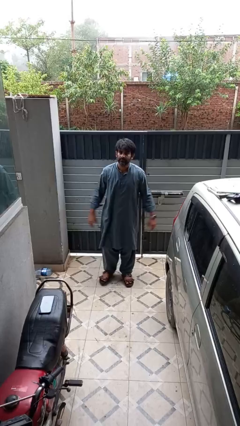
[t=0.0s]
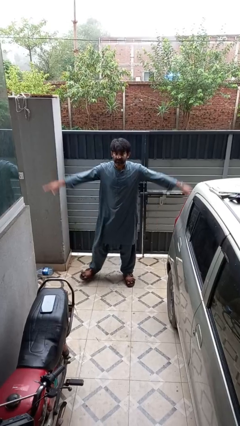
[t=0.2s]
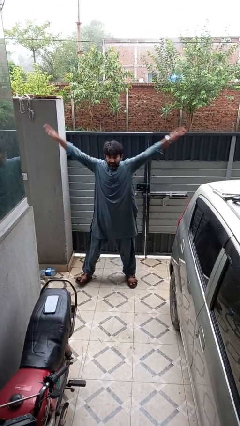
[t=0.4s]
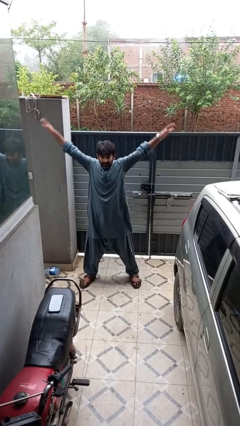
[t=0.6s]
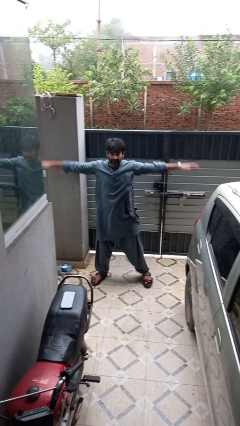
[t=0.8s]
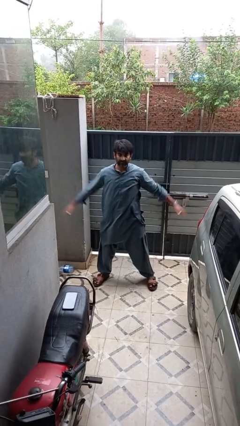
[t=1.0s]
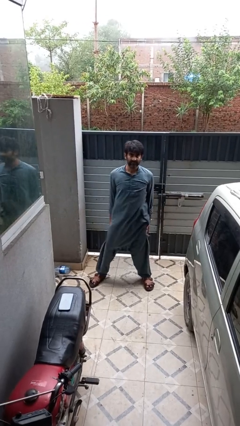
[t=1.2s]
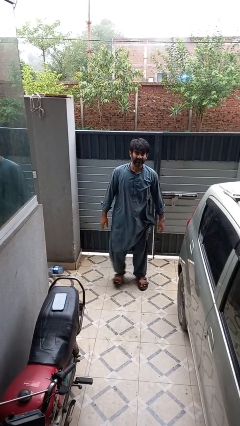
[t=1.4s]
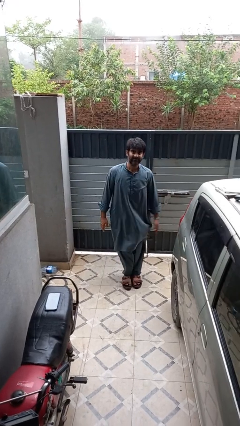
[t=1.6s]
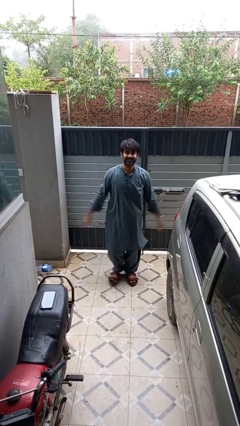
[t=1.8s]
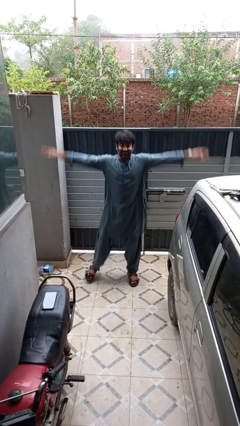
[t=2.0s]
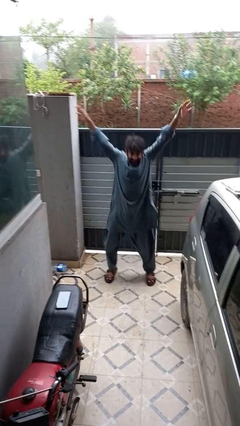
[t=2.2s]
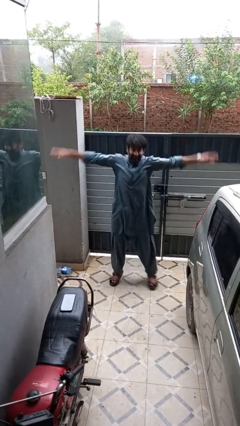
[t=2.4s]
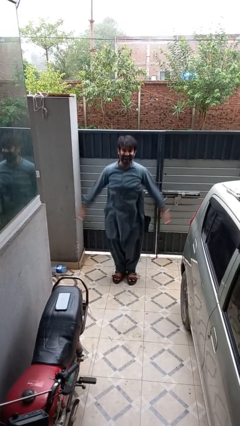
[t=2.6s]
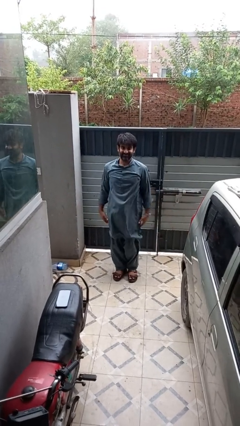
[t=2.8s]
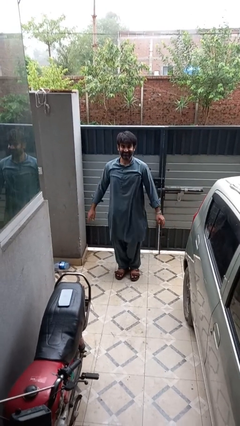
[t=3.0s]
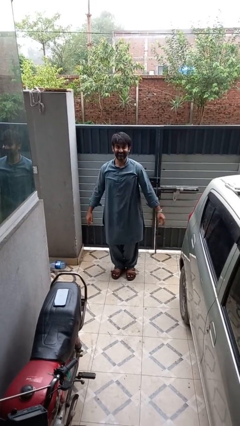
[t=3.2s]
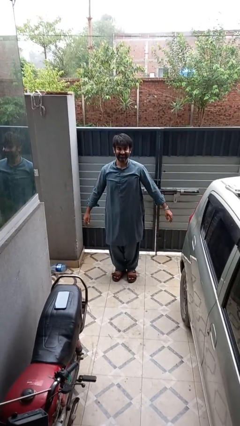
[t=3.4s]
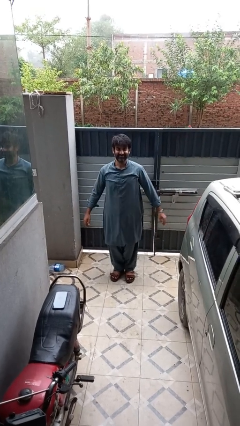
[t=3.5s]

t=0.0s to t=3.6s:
person exercises with jumping jacks

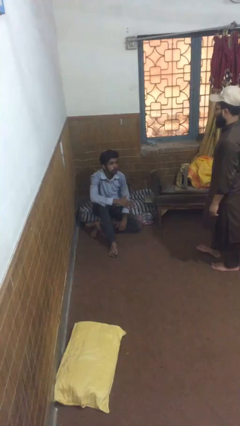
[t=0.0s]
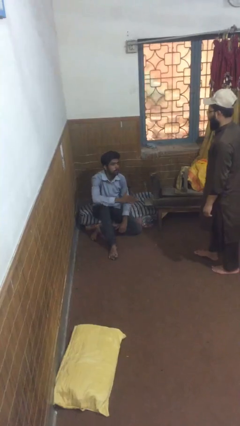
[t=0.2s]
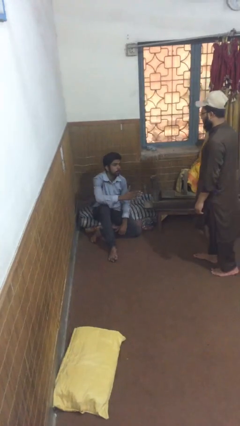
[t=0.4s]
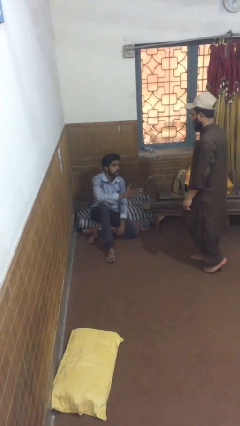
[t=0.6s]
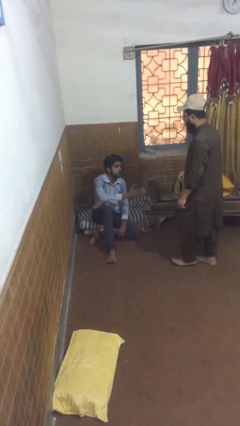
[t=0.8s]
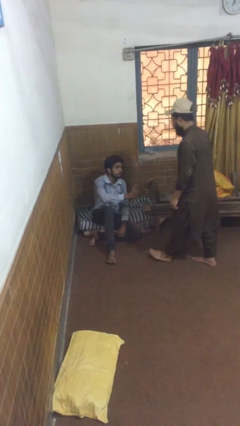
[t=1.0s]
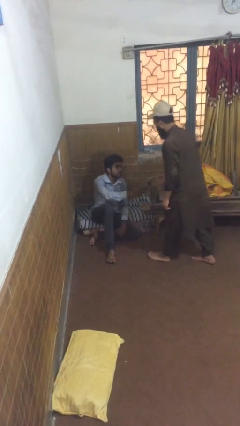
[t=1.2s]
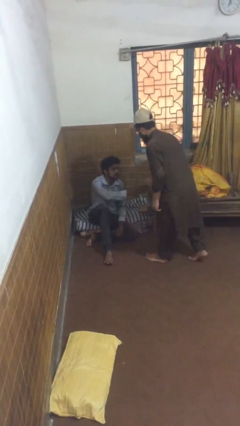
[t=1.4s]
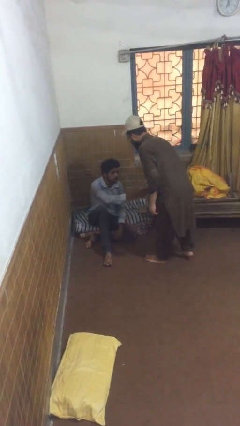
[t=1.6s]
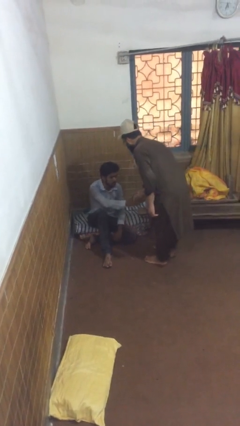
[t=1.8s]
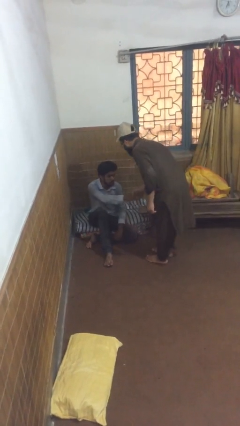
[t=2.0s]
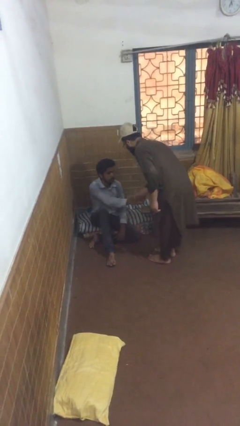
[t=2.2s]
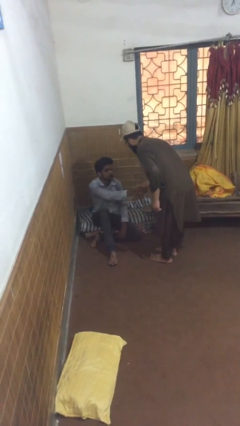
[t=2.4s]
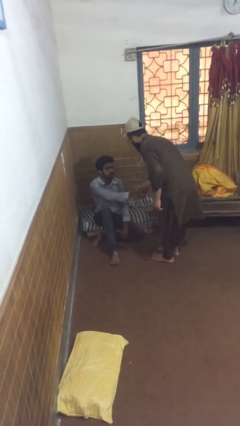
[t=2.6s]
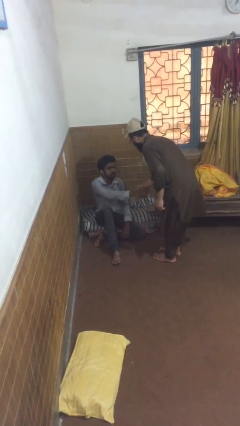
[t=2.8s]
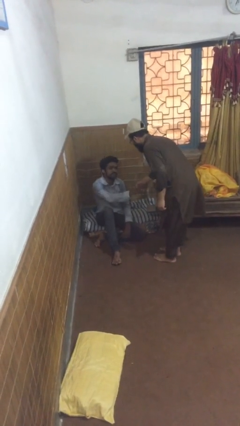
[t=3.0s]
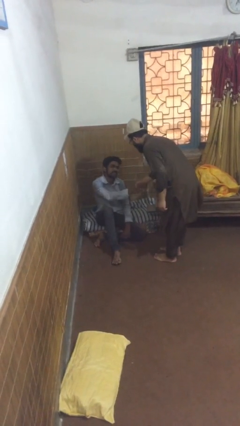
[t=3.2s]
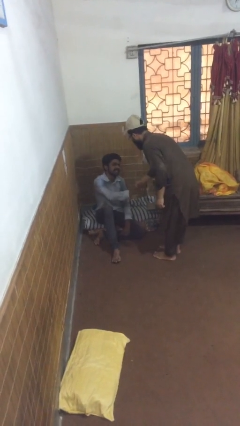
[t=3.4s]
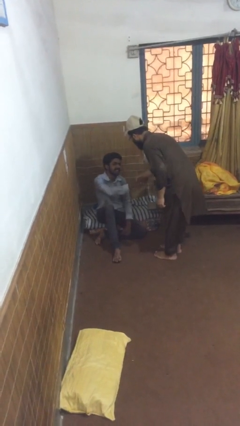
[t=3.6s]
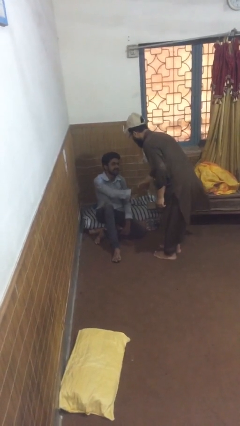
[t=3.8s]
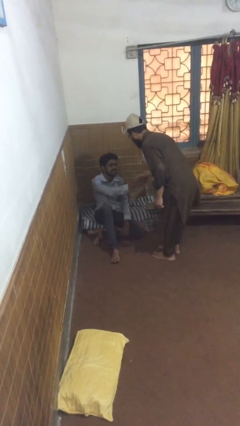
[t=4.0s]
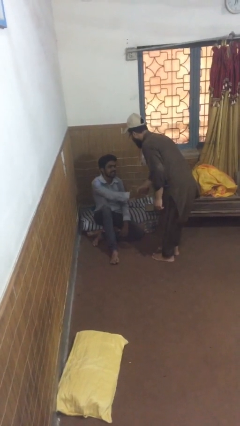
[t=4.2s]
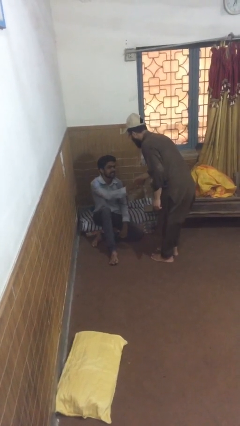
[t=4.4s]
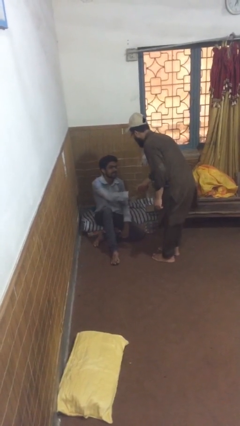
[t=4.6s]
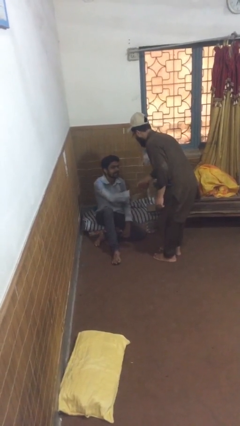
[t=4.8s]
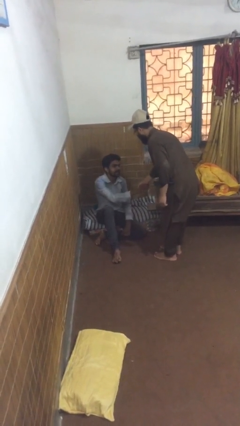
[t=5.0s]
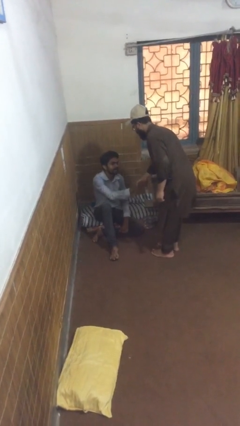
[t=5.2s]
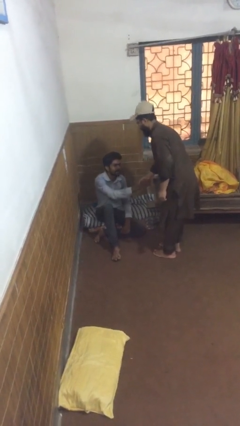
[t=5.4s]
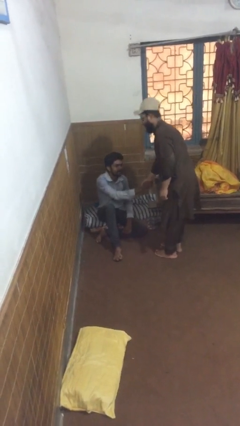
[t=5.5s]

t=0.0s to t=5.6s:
person shakes hand

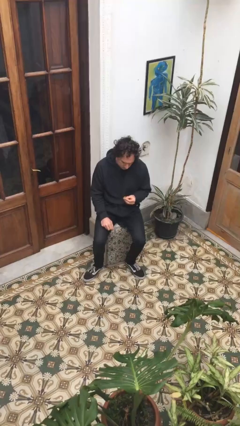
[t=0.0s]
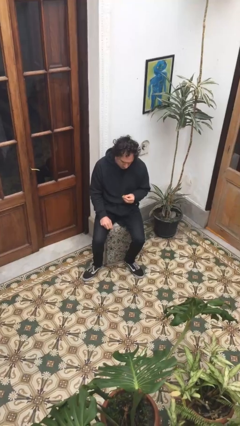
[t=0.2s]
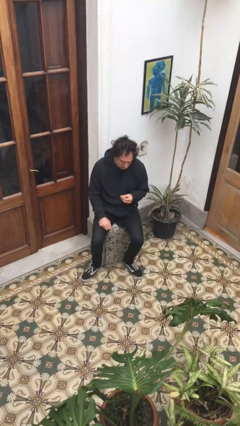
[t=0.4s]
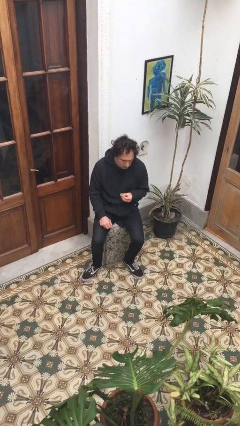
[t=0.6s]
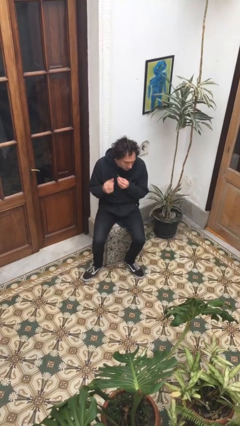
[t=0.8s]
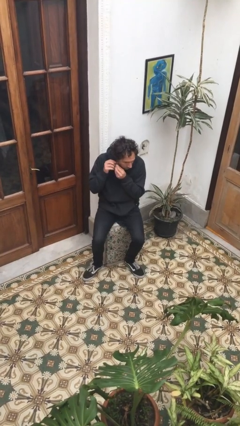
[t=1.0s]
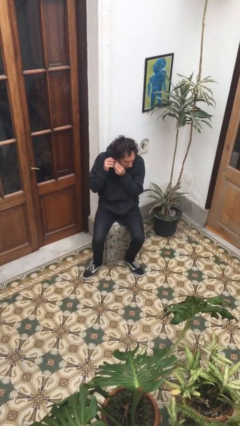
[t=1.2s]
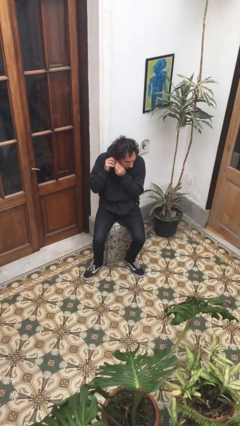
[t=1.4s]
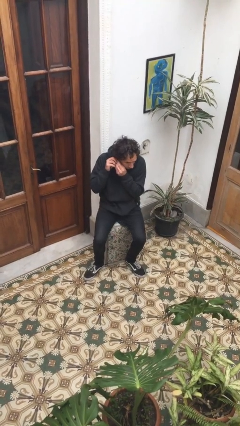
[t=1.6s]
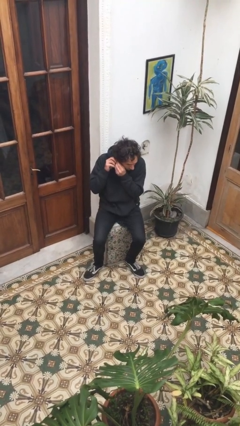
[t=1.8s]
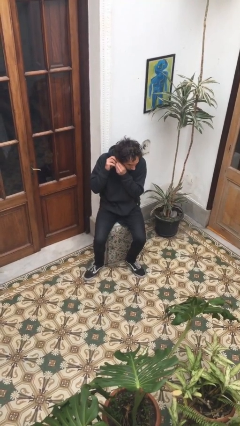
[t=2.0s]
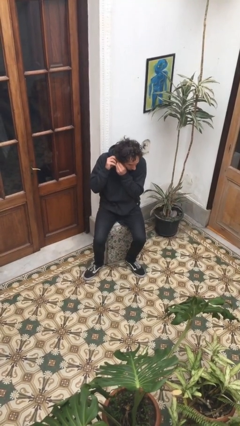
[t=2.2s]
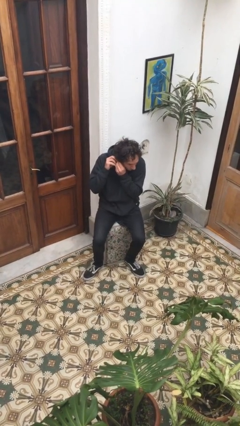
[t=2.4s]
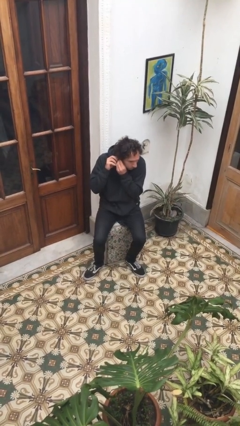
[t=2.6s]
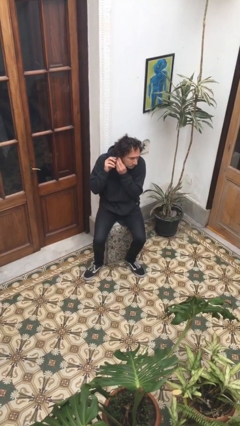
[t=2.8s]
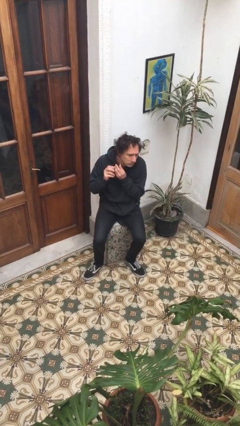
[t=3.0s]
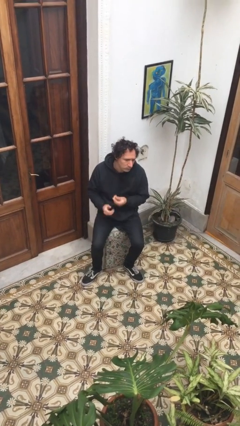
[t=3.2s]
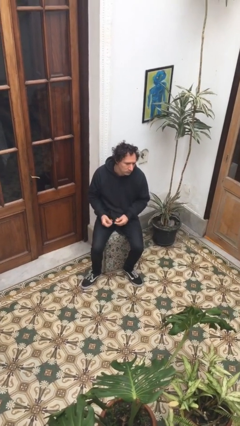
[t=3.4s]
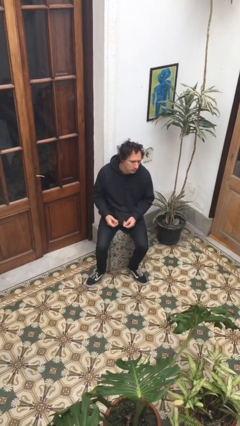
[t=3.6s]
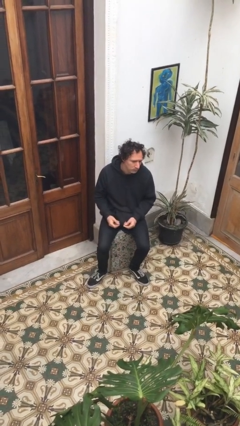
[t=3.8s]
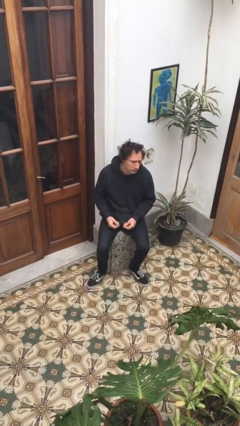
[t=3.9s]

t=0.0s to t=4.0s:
person puts on earrings

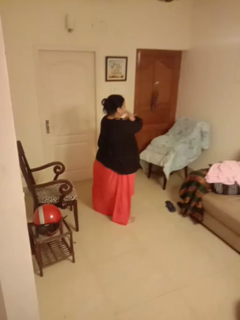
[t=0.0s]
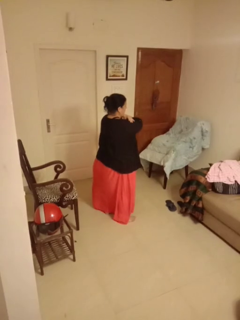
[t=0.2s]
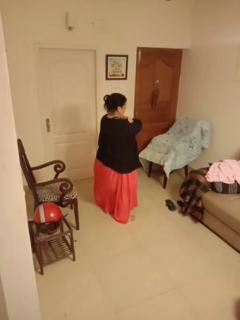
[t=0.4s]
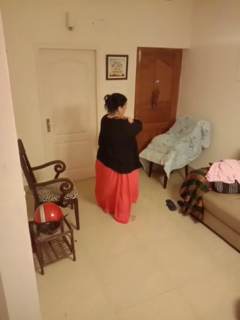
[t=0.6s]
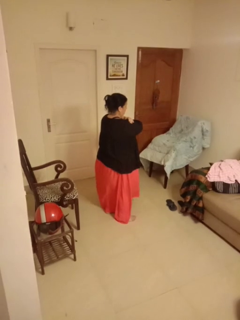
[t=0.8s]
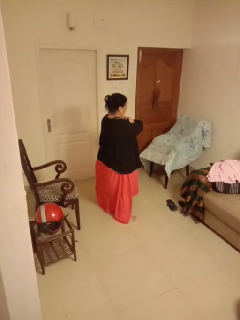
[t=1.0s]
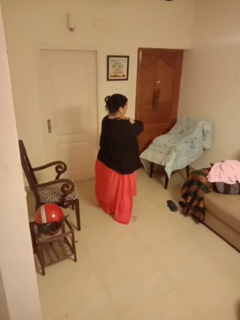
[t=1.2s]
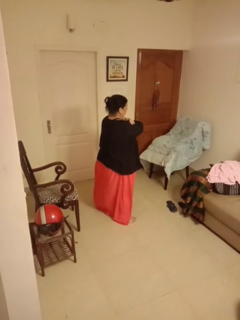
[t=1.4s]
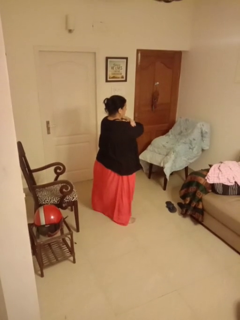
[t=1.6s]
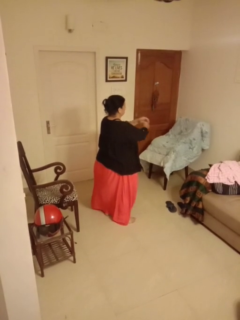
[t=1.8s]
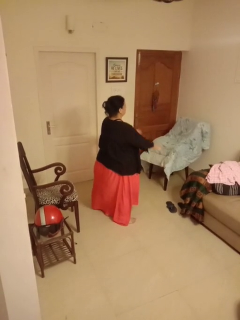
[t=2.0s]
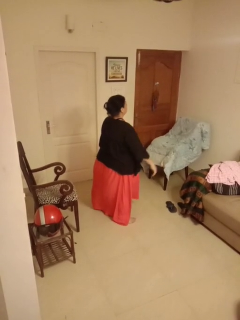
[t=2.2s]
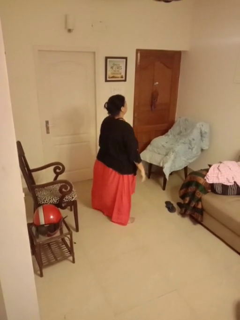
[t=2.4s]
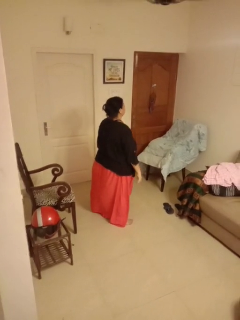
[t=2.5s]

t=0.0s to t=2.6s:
person gestures arms x

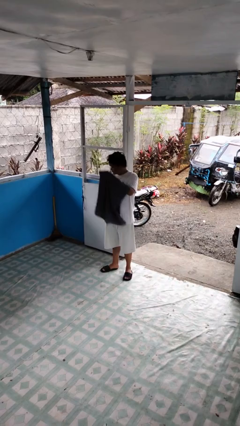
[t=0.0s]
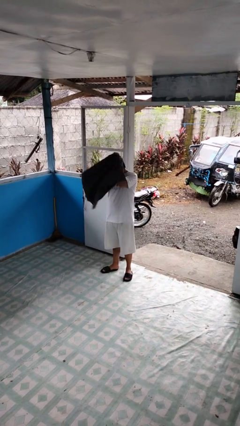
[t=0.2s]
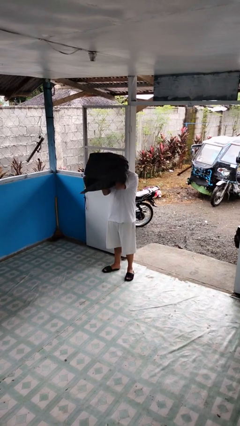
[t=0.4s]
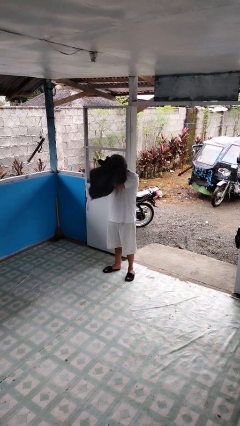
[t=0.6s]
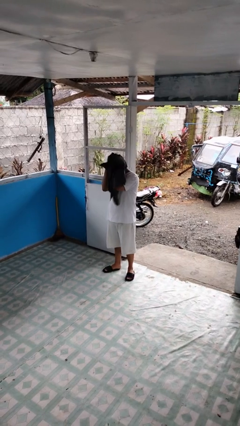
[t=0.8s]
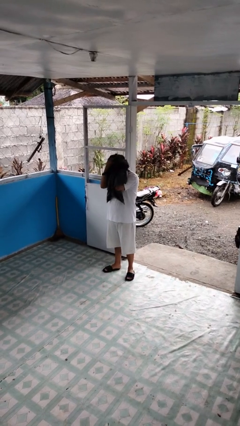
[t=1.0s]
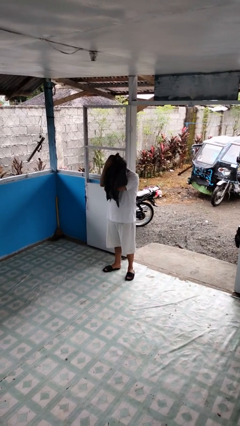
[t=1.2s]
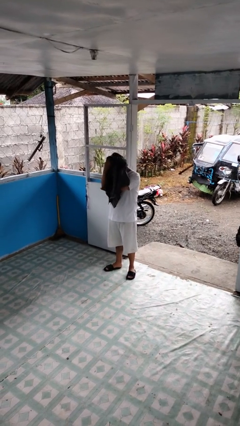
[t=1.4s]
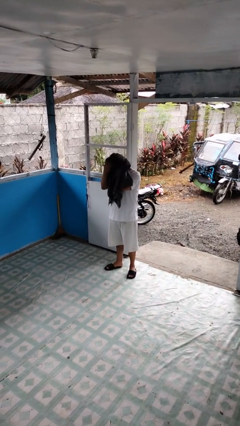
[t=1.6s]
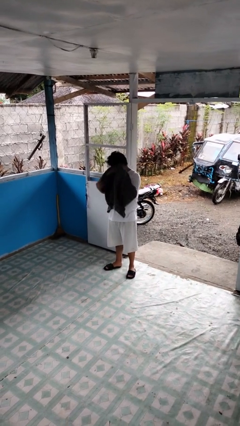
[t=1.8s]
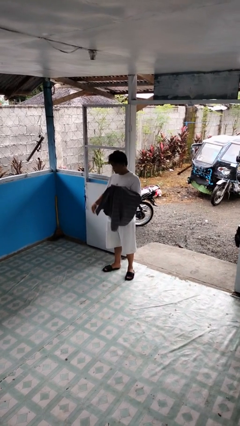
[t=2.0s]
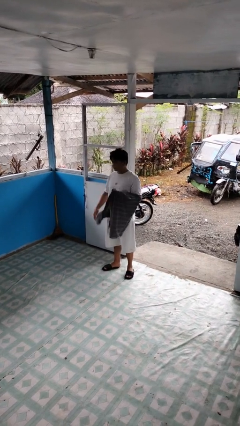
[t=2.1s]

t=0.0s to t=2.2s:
person dries hair with towel

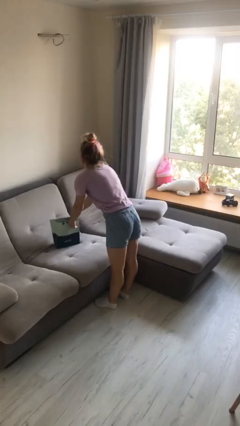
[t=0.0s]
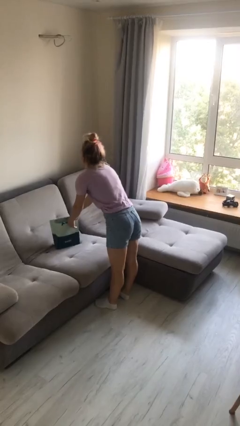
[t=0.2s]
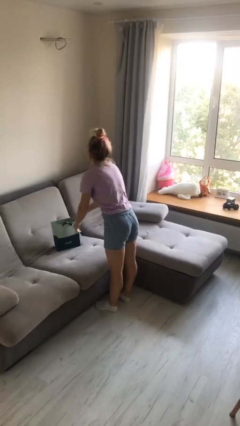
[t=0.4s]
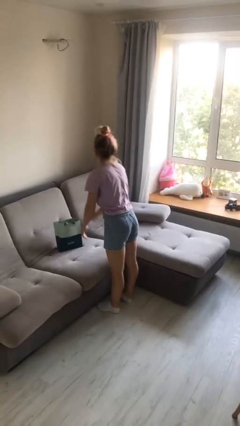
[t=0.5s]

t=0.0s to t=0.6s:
person puts down object on couch
